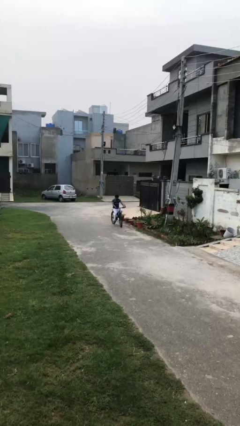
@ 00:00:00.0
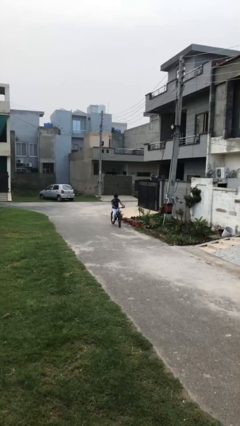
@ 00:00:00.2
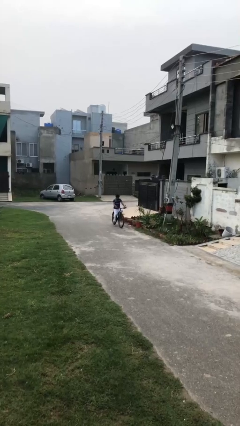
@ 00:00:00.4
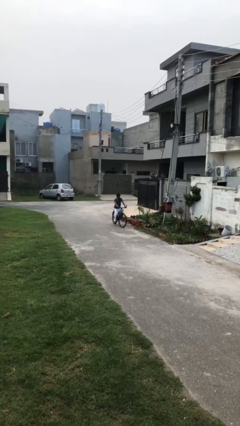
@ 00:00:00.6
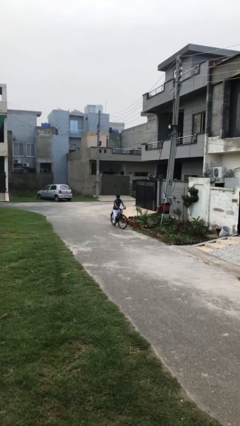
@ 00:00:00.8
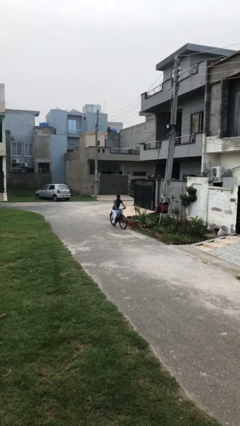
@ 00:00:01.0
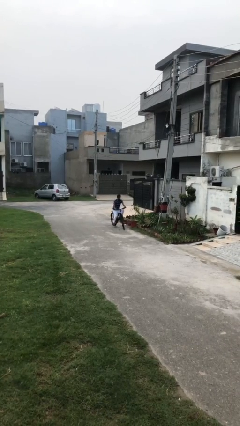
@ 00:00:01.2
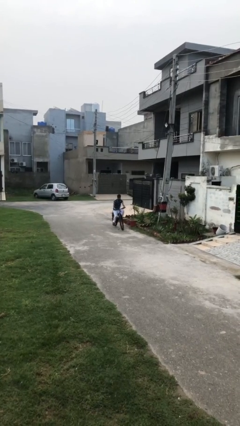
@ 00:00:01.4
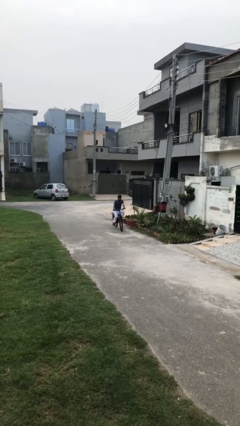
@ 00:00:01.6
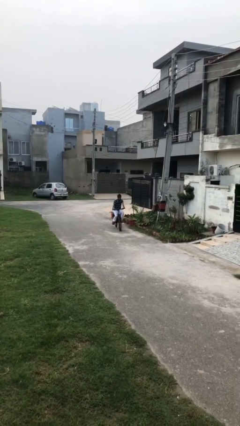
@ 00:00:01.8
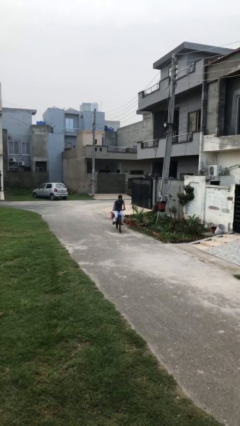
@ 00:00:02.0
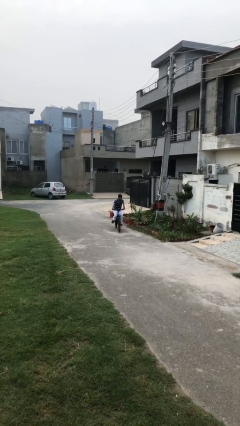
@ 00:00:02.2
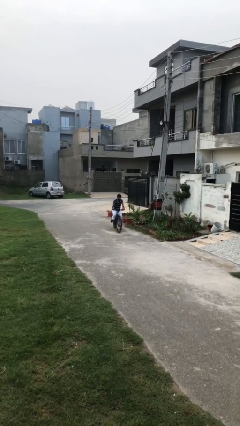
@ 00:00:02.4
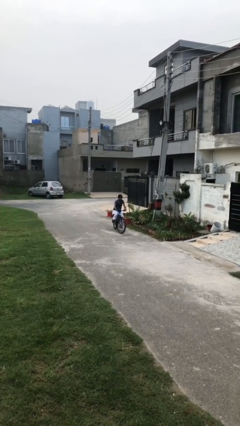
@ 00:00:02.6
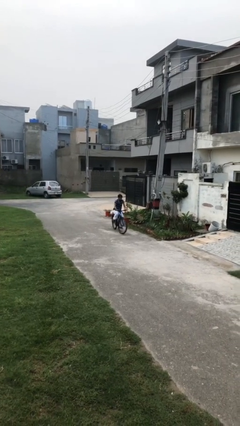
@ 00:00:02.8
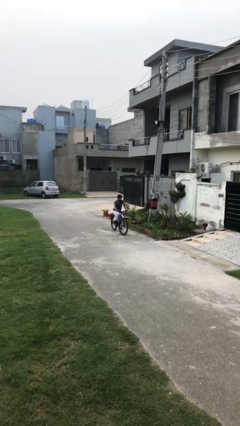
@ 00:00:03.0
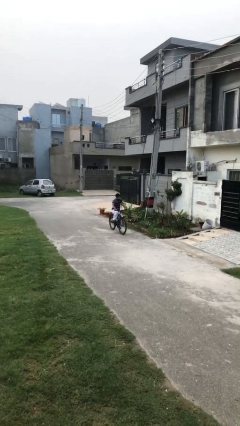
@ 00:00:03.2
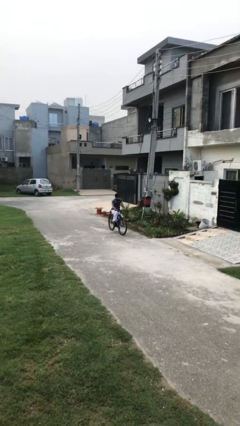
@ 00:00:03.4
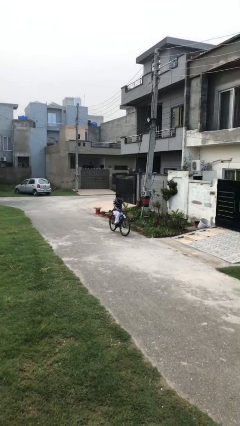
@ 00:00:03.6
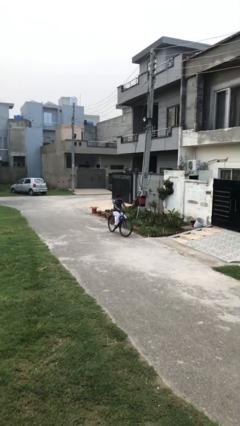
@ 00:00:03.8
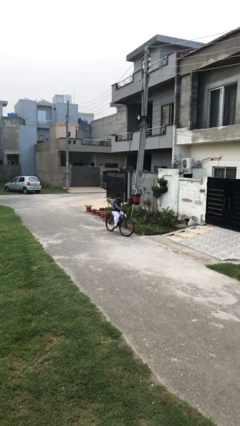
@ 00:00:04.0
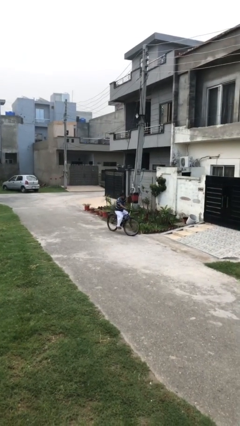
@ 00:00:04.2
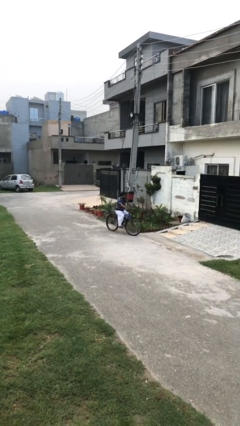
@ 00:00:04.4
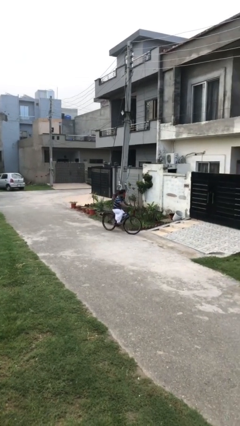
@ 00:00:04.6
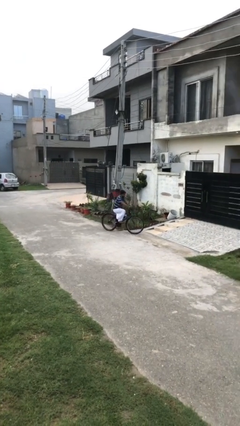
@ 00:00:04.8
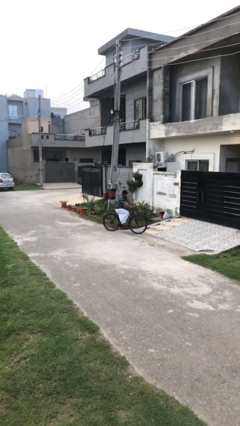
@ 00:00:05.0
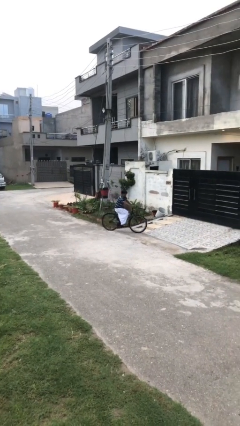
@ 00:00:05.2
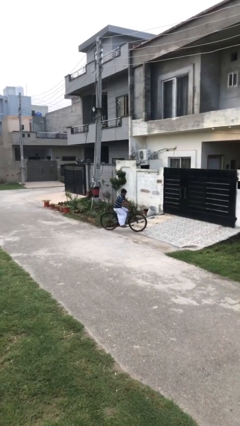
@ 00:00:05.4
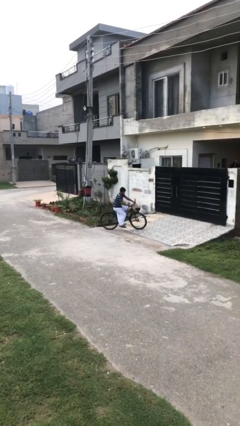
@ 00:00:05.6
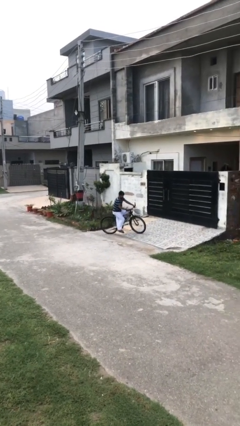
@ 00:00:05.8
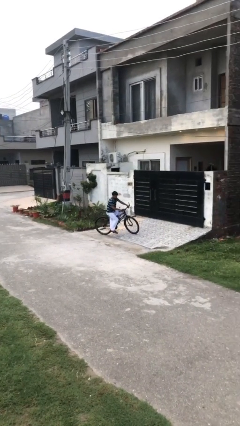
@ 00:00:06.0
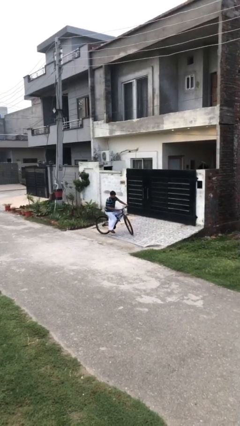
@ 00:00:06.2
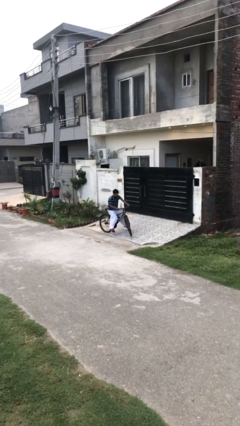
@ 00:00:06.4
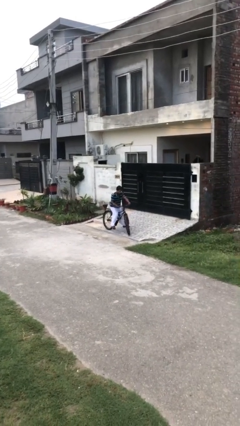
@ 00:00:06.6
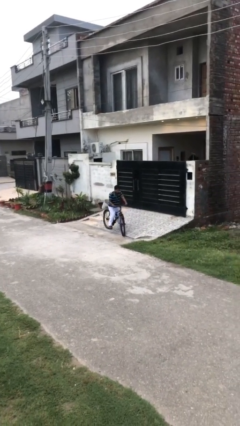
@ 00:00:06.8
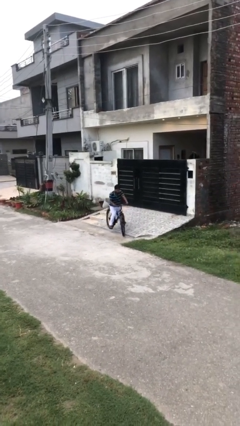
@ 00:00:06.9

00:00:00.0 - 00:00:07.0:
person rides bicycle

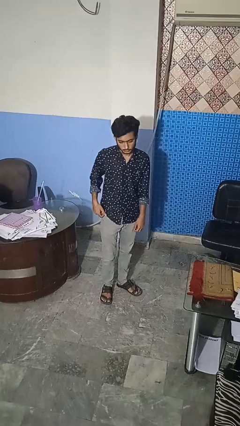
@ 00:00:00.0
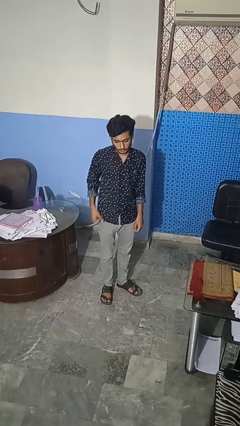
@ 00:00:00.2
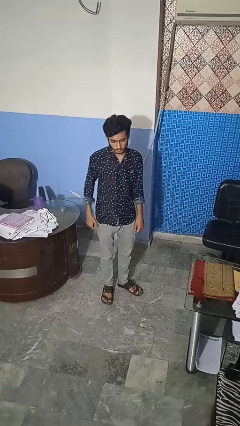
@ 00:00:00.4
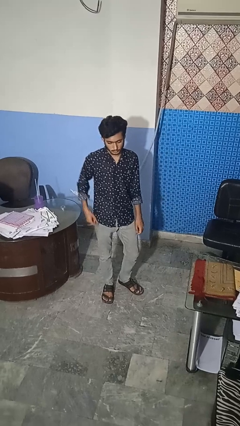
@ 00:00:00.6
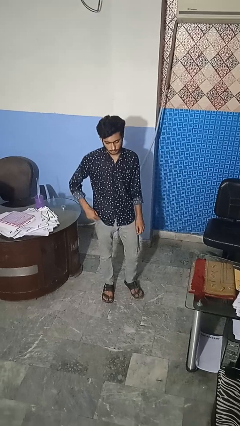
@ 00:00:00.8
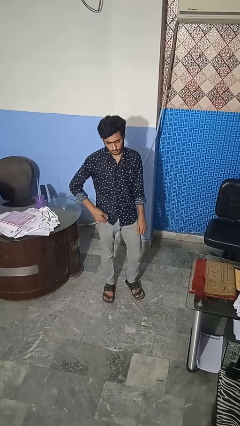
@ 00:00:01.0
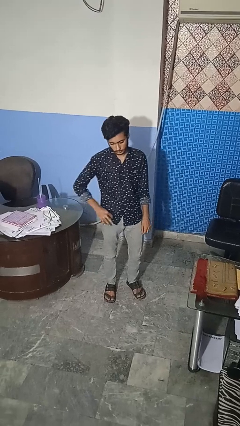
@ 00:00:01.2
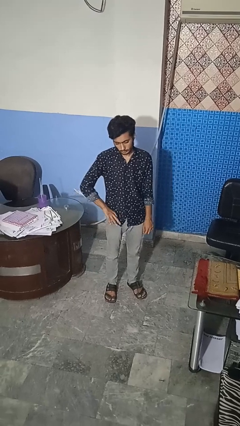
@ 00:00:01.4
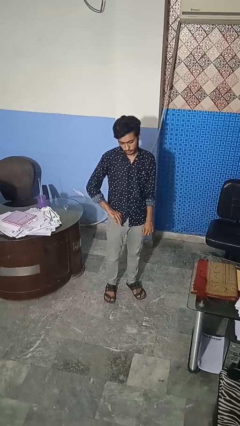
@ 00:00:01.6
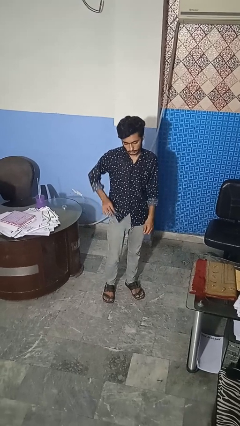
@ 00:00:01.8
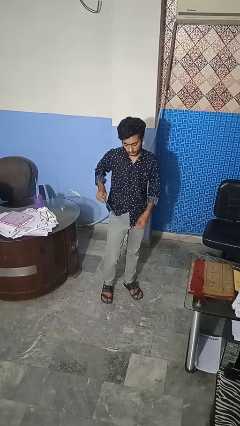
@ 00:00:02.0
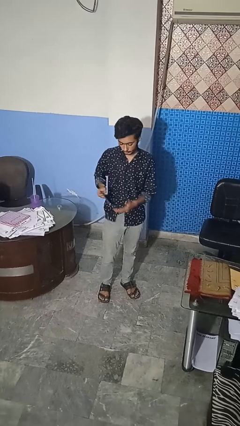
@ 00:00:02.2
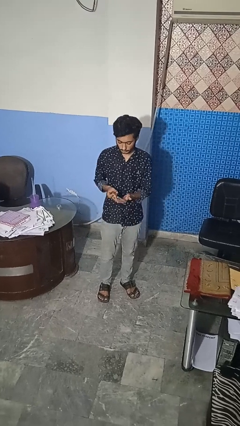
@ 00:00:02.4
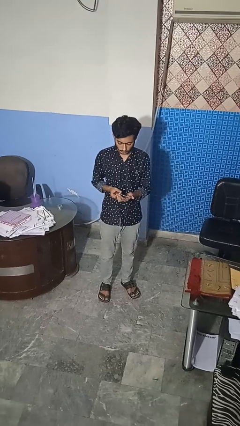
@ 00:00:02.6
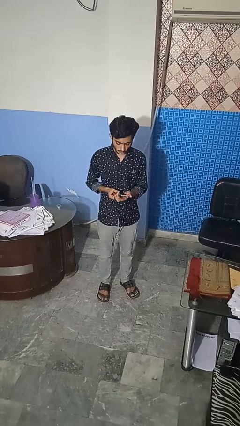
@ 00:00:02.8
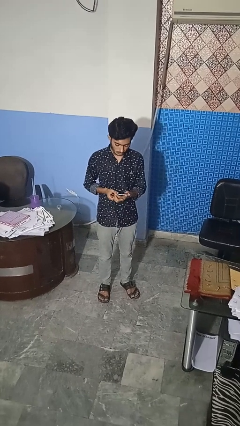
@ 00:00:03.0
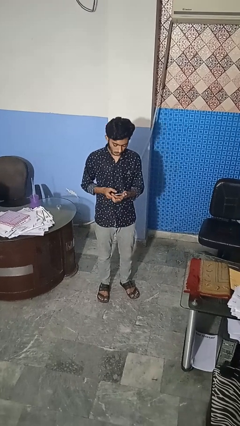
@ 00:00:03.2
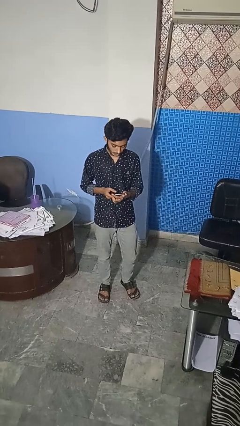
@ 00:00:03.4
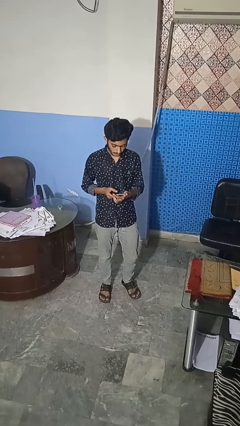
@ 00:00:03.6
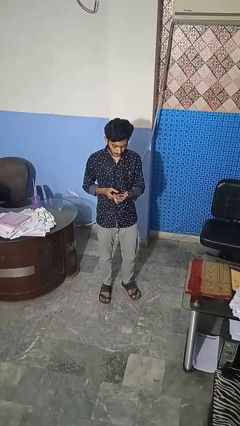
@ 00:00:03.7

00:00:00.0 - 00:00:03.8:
person takes phone from pocket

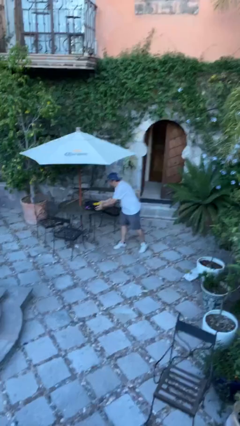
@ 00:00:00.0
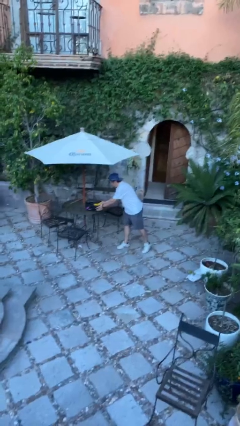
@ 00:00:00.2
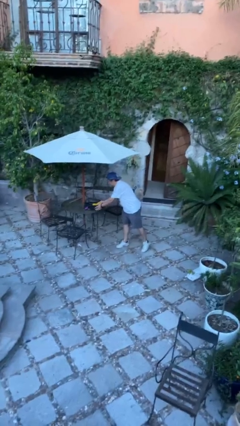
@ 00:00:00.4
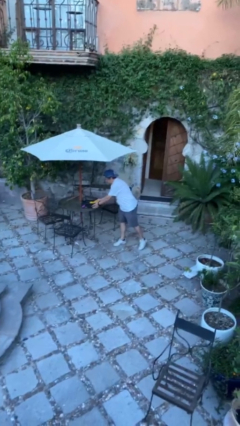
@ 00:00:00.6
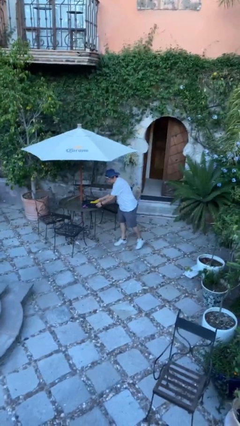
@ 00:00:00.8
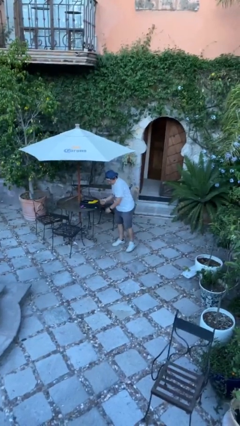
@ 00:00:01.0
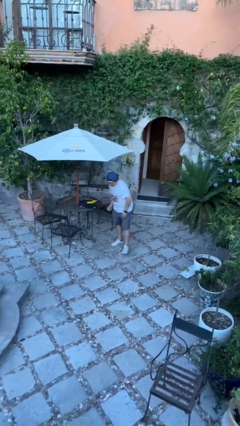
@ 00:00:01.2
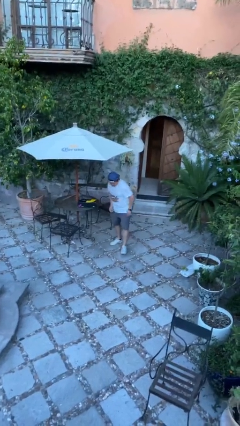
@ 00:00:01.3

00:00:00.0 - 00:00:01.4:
person puts down object on table

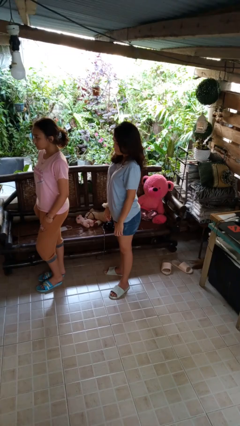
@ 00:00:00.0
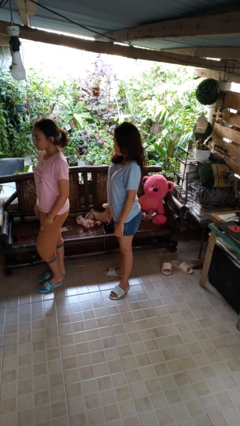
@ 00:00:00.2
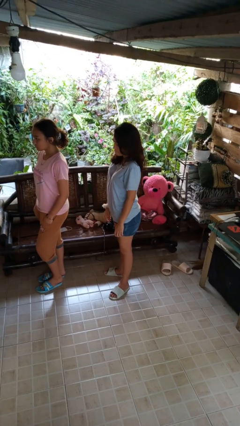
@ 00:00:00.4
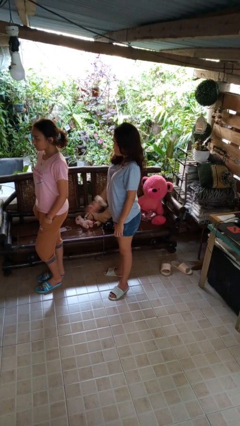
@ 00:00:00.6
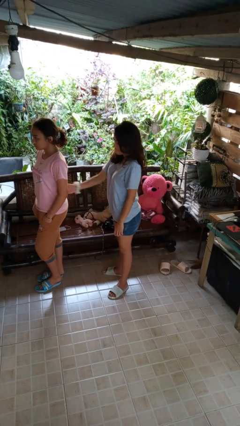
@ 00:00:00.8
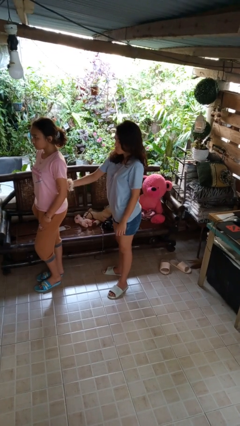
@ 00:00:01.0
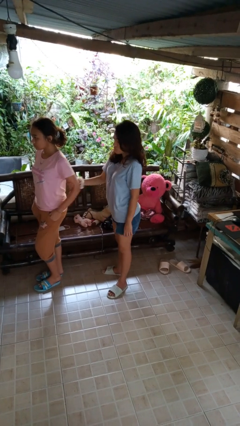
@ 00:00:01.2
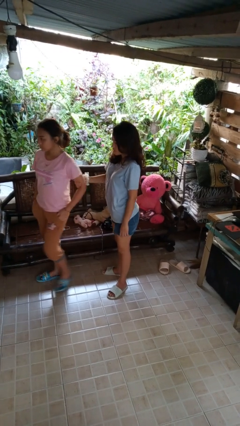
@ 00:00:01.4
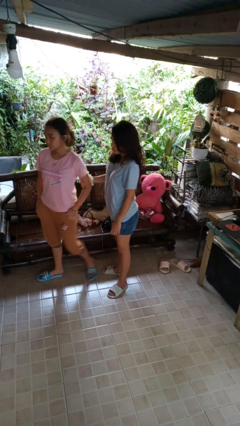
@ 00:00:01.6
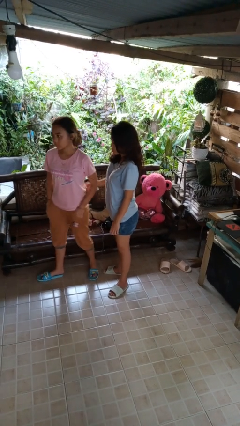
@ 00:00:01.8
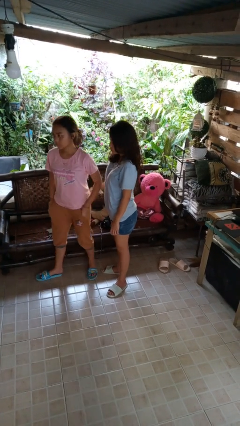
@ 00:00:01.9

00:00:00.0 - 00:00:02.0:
person grabs person by bicep

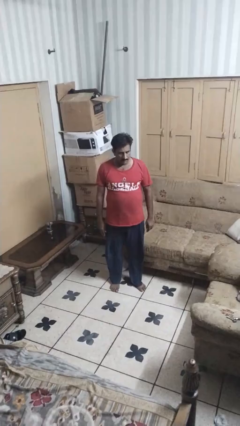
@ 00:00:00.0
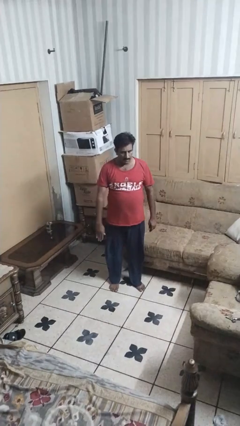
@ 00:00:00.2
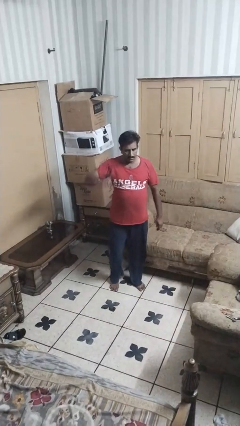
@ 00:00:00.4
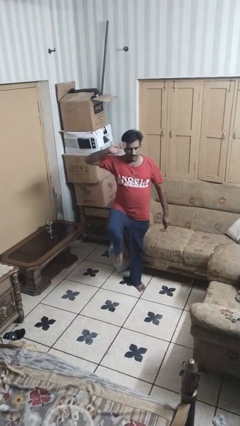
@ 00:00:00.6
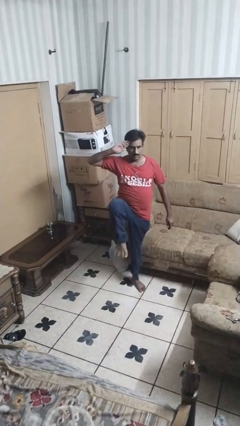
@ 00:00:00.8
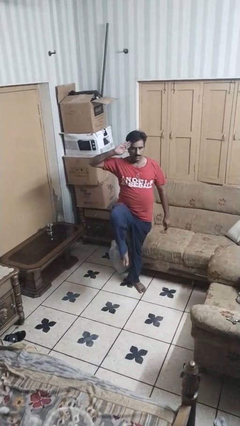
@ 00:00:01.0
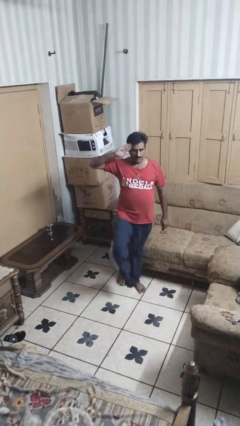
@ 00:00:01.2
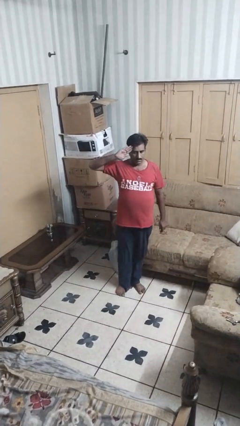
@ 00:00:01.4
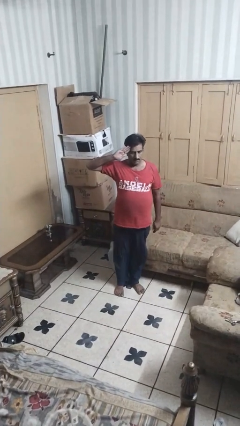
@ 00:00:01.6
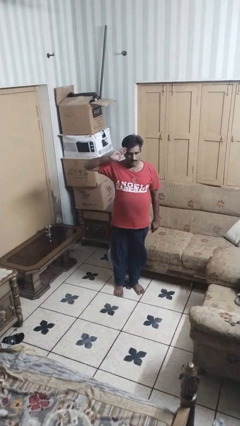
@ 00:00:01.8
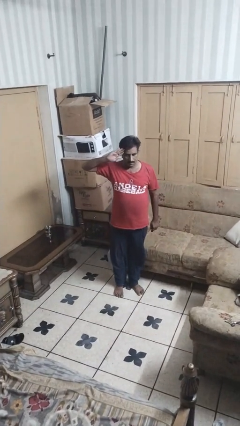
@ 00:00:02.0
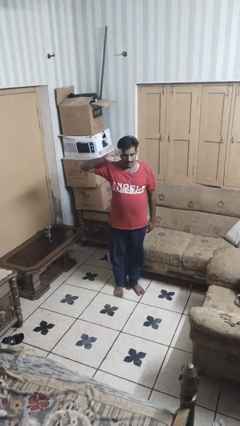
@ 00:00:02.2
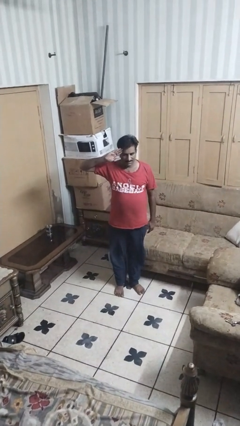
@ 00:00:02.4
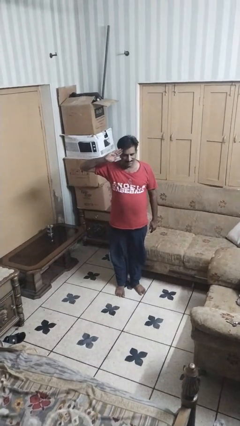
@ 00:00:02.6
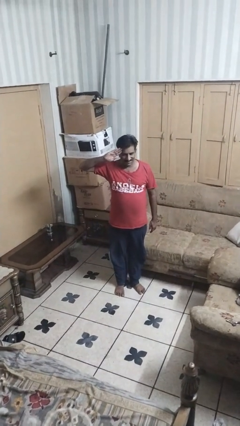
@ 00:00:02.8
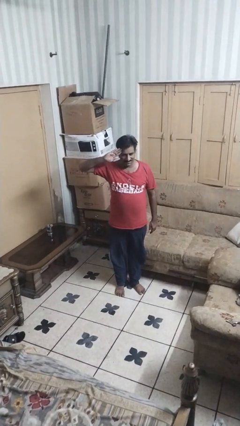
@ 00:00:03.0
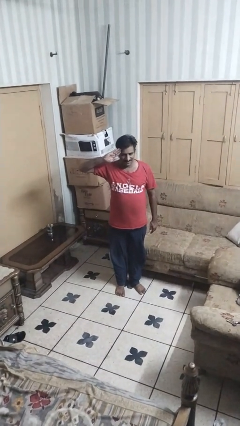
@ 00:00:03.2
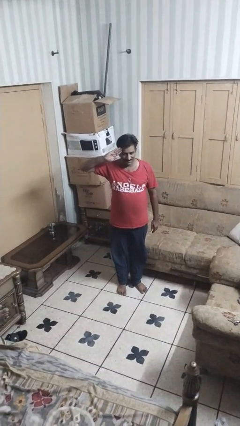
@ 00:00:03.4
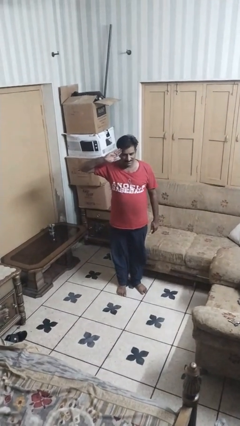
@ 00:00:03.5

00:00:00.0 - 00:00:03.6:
person salutes
